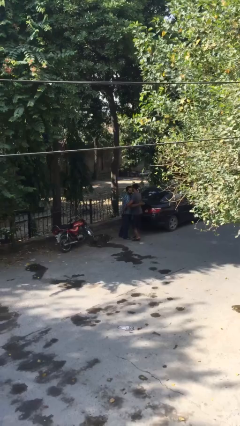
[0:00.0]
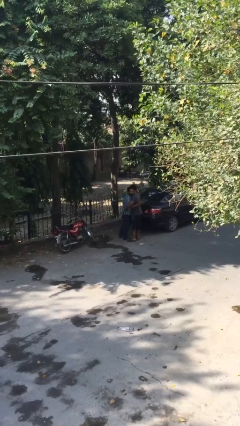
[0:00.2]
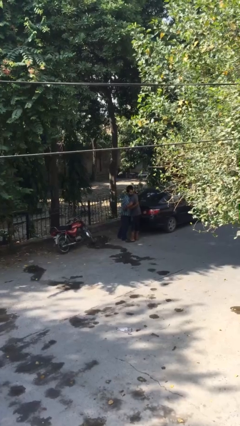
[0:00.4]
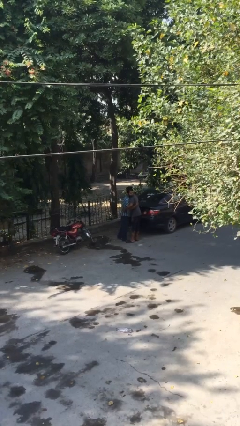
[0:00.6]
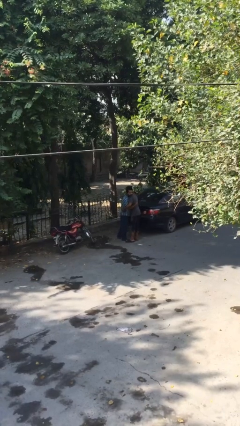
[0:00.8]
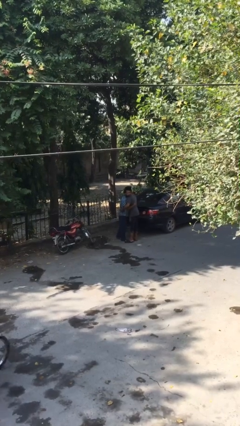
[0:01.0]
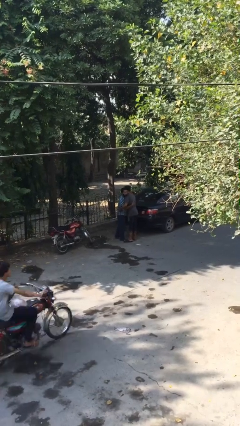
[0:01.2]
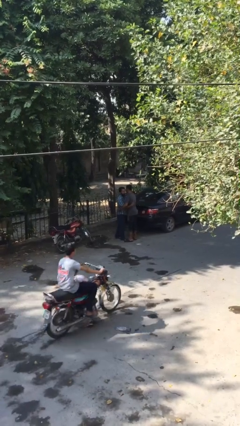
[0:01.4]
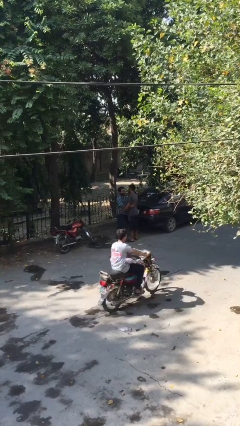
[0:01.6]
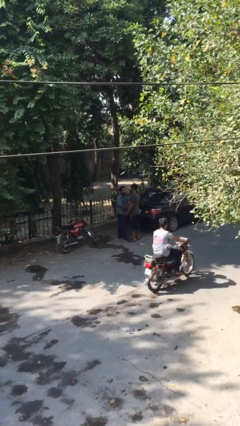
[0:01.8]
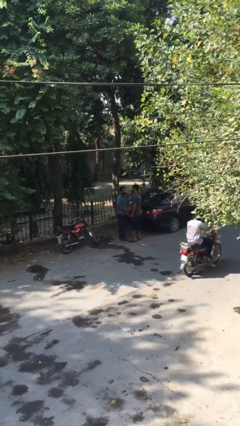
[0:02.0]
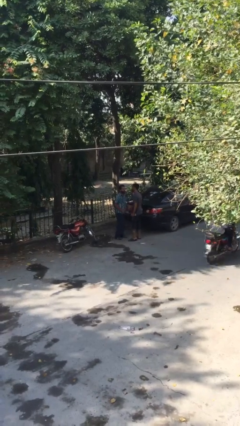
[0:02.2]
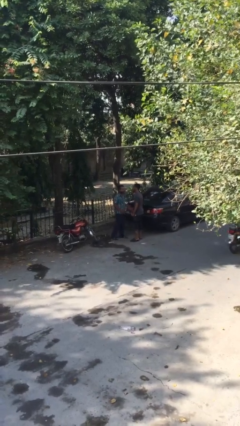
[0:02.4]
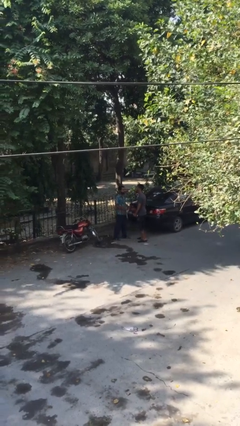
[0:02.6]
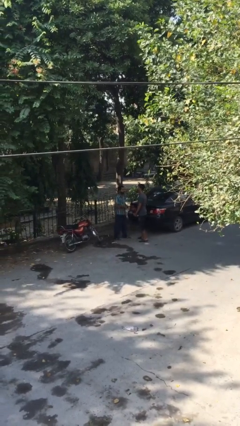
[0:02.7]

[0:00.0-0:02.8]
person embraces person

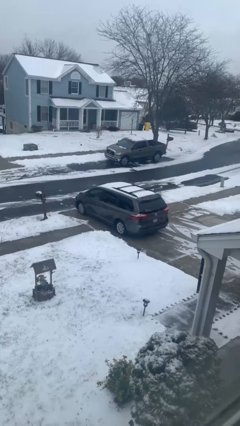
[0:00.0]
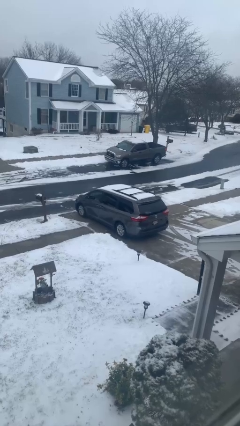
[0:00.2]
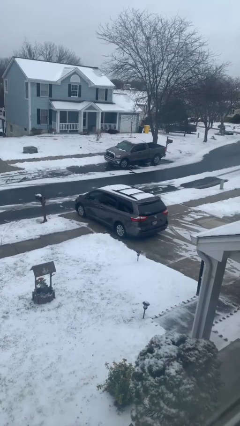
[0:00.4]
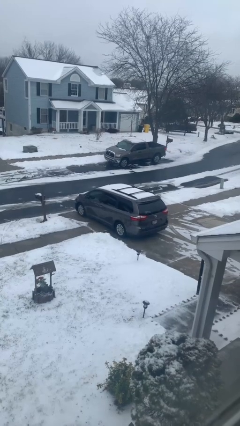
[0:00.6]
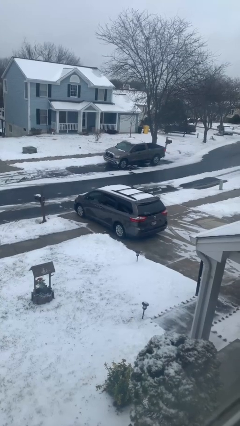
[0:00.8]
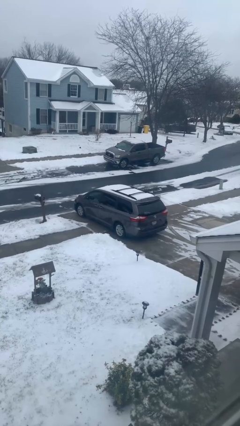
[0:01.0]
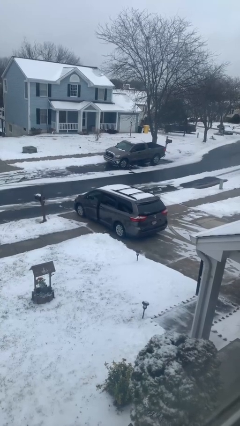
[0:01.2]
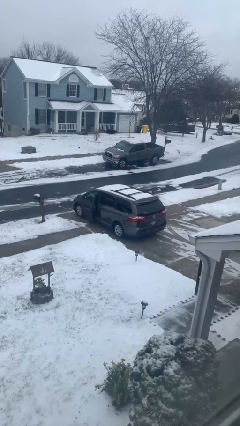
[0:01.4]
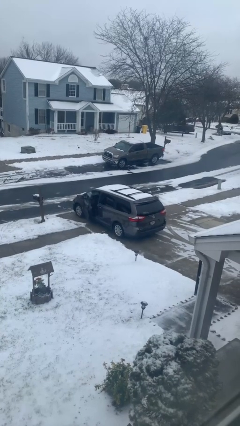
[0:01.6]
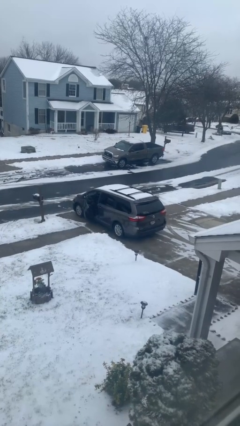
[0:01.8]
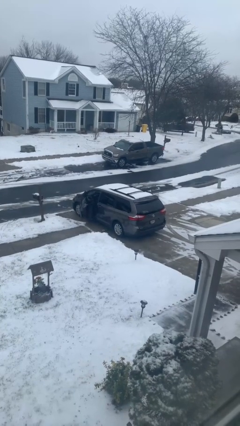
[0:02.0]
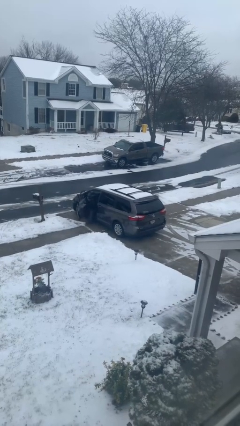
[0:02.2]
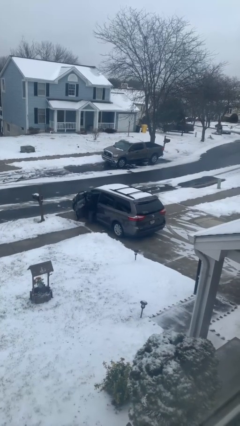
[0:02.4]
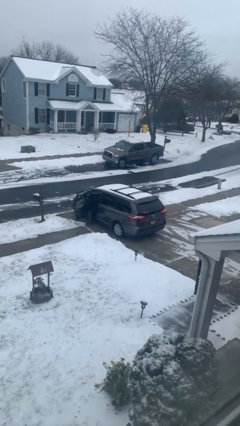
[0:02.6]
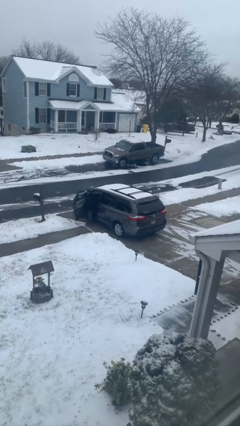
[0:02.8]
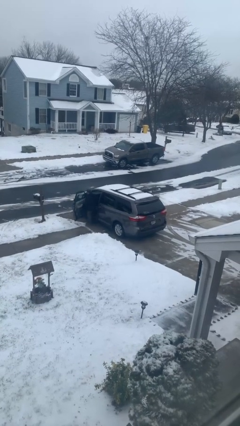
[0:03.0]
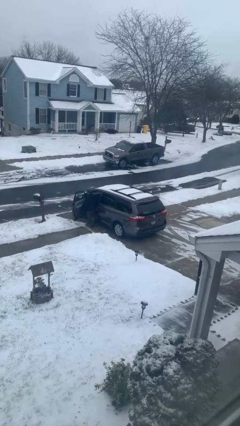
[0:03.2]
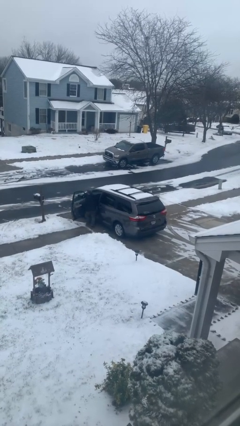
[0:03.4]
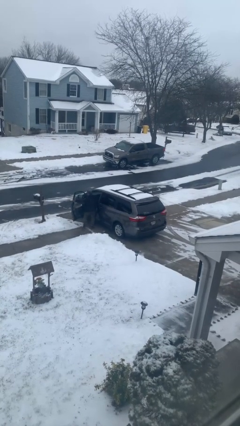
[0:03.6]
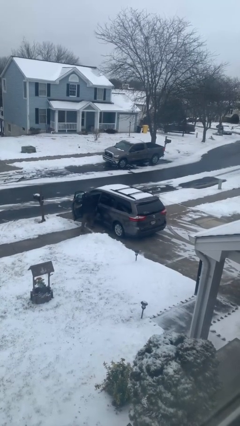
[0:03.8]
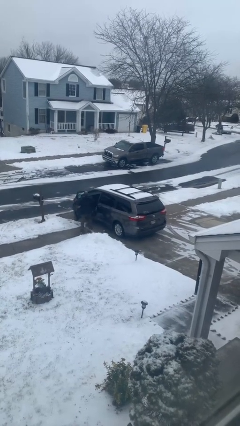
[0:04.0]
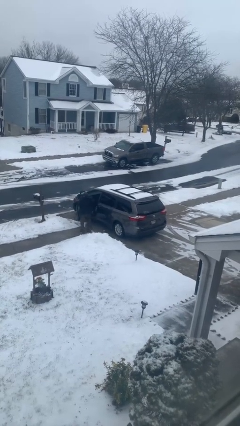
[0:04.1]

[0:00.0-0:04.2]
car drops off person

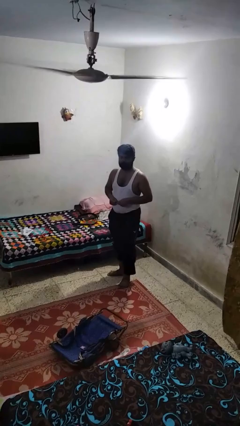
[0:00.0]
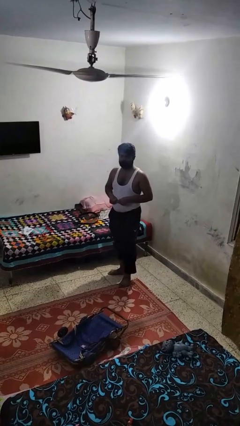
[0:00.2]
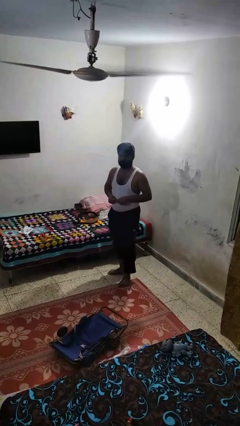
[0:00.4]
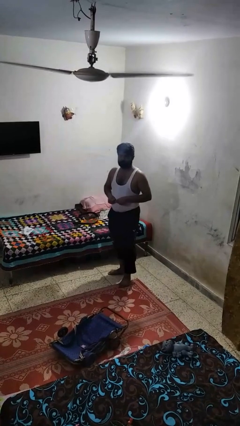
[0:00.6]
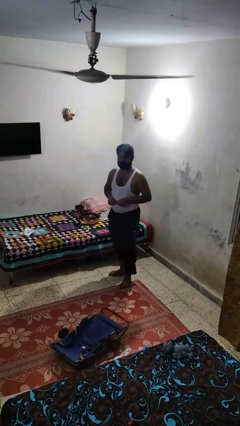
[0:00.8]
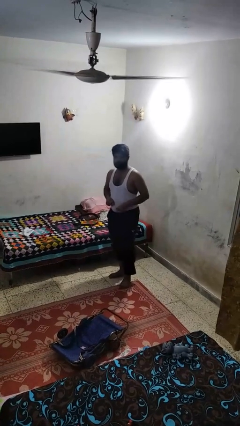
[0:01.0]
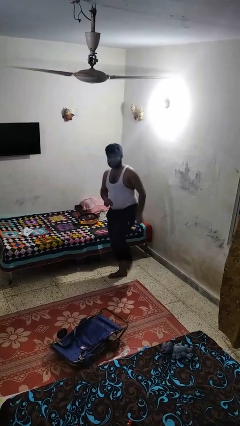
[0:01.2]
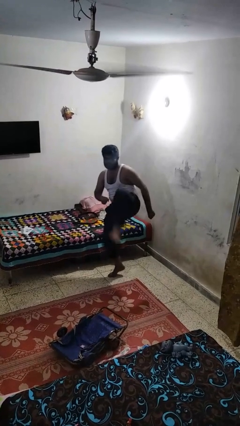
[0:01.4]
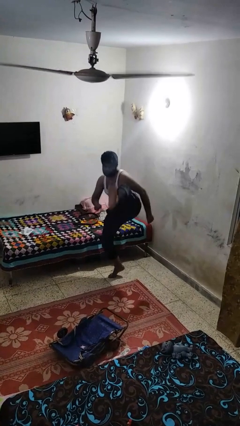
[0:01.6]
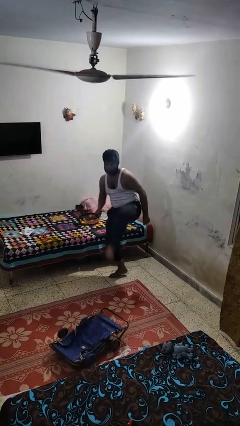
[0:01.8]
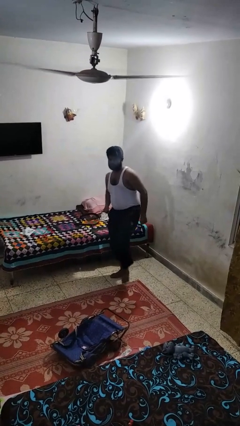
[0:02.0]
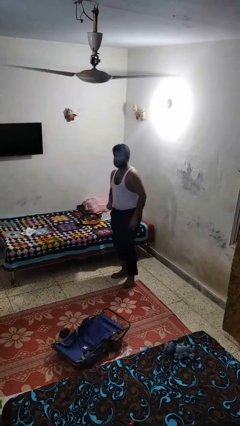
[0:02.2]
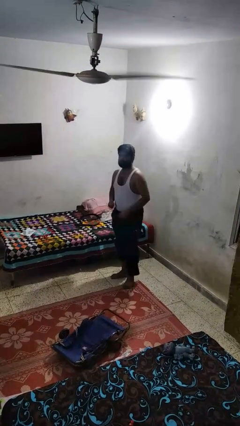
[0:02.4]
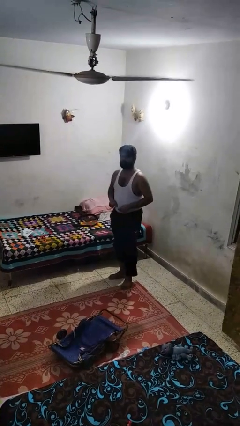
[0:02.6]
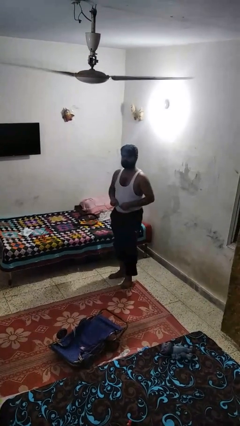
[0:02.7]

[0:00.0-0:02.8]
person karate kicks

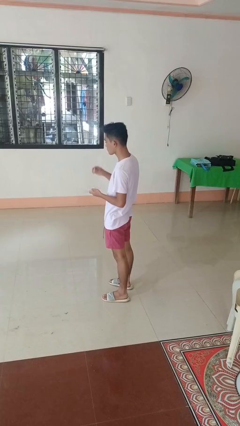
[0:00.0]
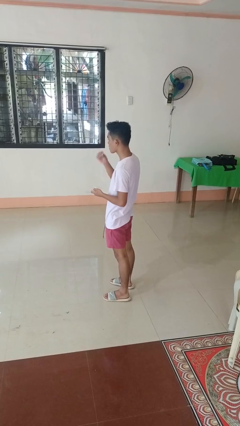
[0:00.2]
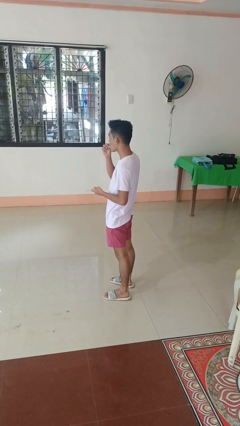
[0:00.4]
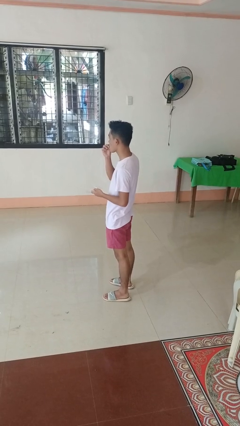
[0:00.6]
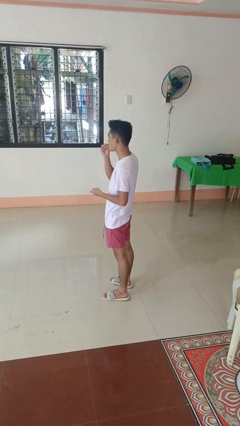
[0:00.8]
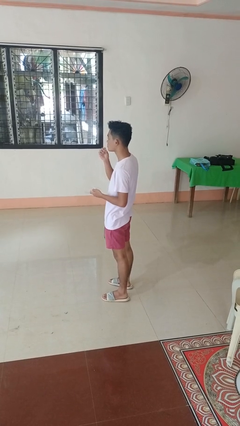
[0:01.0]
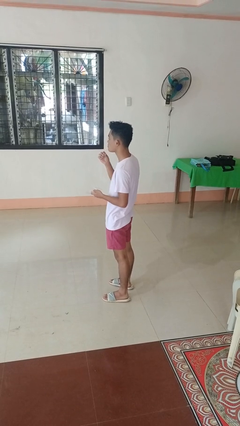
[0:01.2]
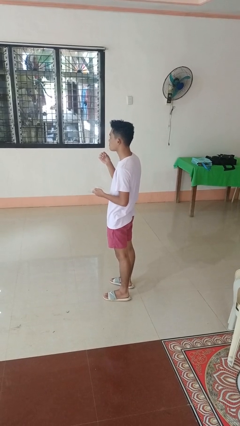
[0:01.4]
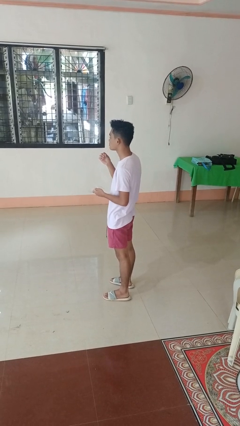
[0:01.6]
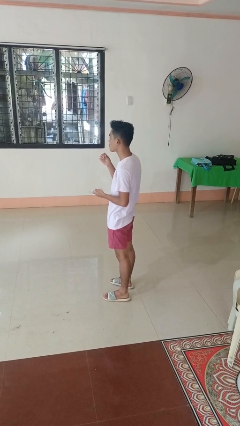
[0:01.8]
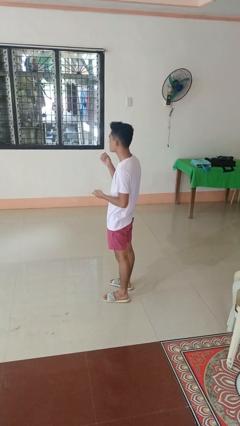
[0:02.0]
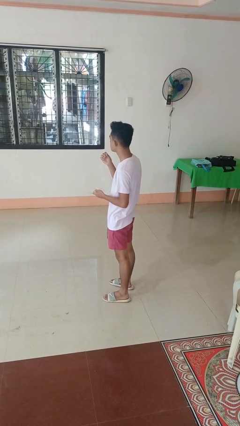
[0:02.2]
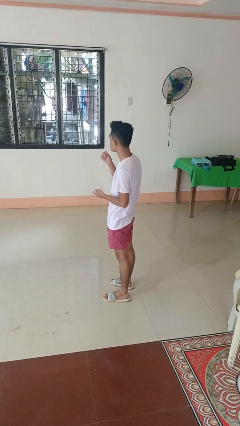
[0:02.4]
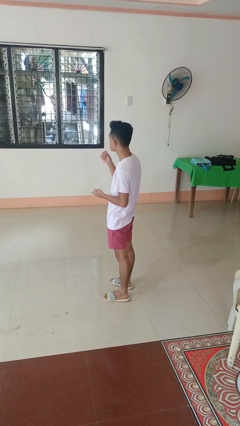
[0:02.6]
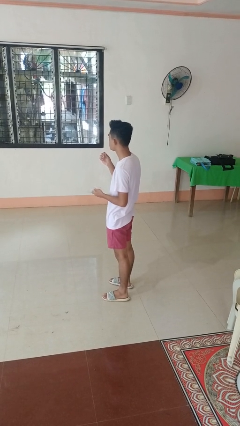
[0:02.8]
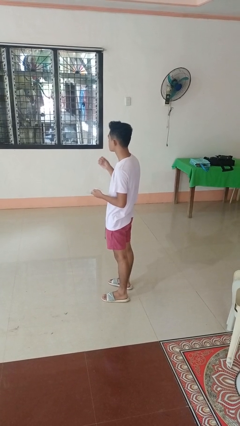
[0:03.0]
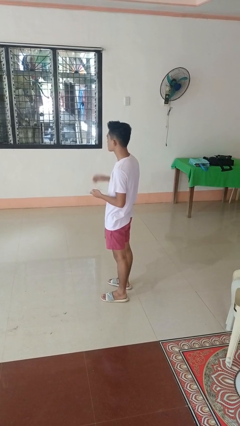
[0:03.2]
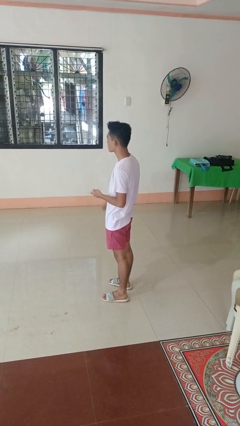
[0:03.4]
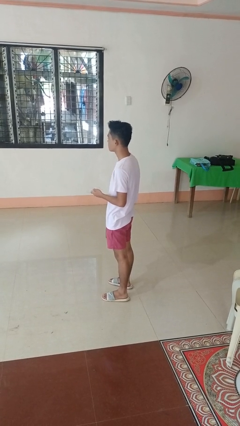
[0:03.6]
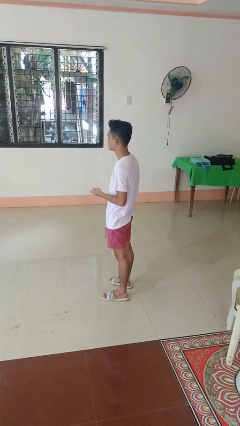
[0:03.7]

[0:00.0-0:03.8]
person eats snack from bag

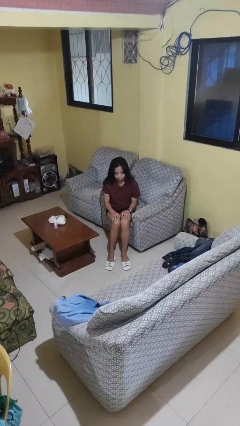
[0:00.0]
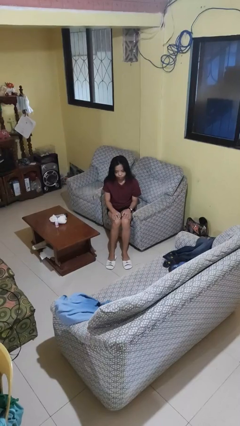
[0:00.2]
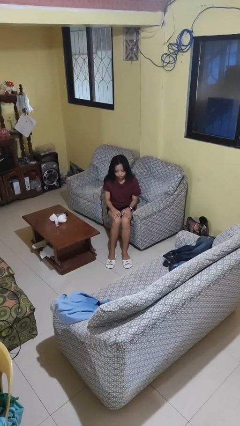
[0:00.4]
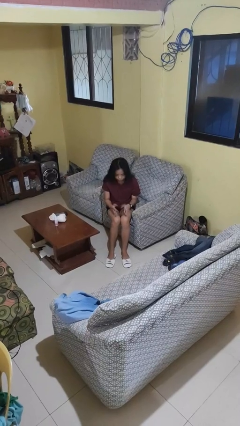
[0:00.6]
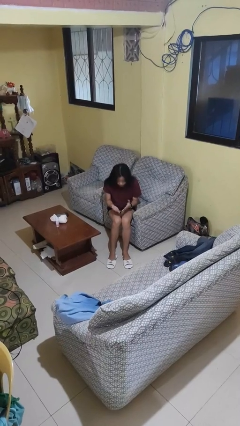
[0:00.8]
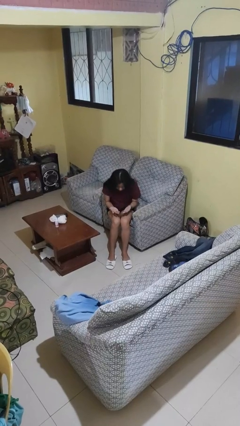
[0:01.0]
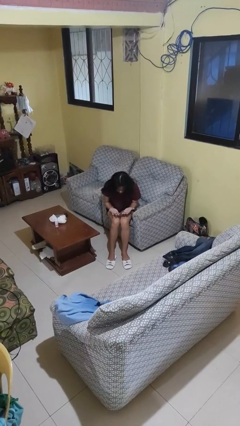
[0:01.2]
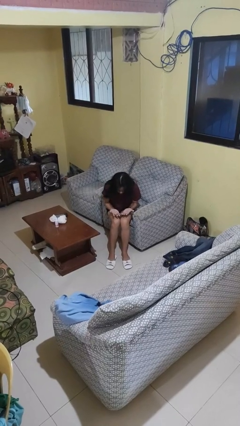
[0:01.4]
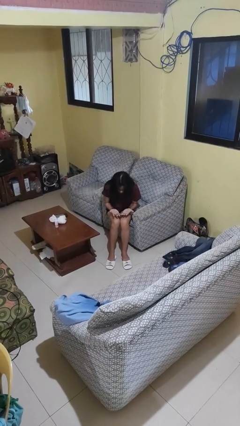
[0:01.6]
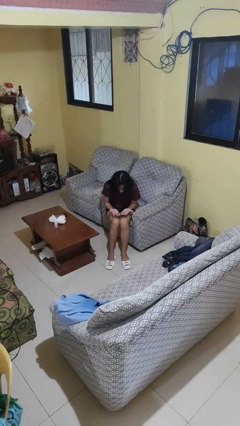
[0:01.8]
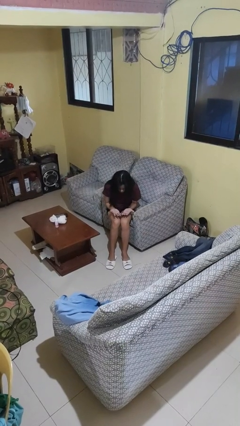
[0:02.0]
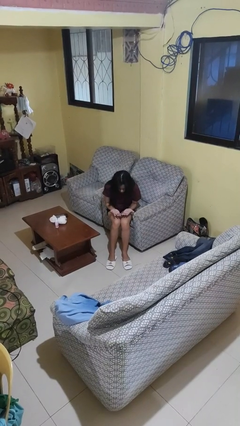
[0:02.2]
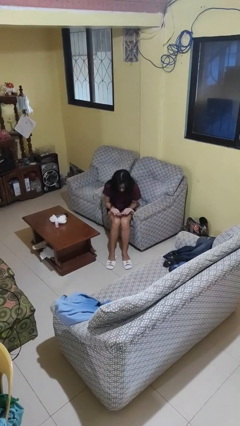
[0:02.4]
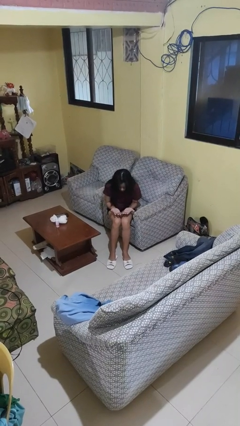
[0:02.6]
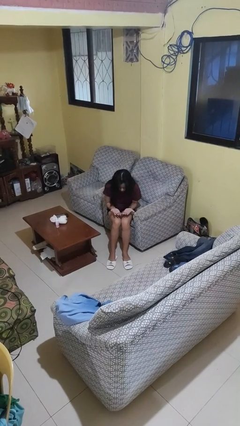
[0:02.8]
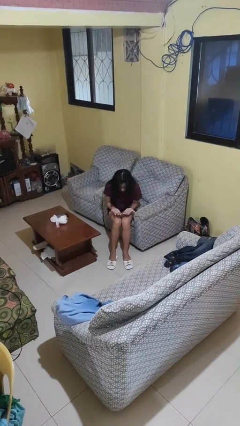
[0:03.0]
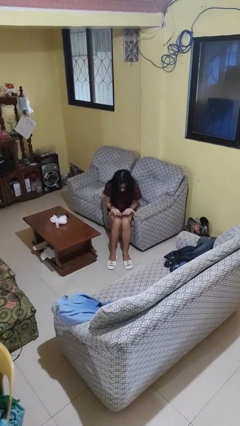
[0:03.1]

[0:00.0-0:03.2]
person looks at hands in lap

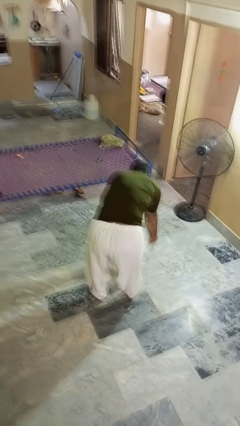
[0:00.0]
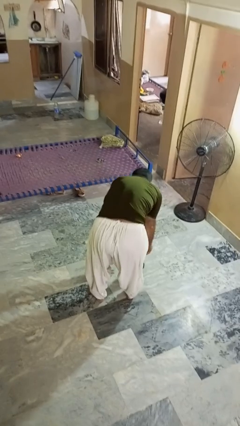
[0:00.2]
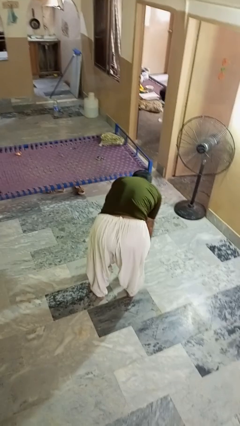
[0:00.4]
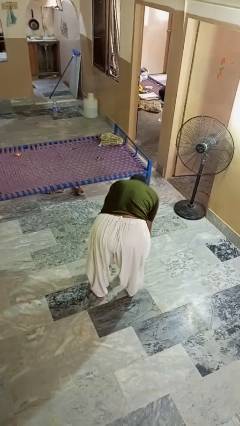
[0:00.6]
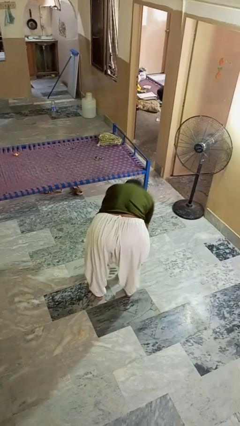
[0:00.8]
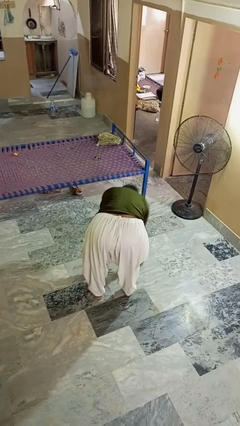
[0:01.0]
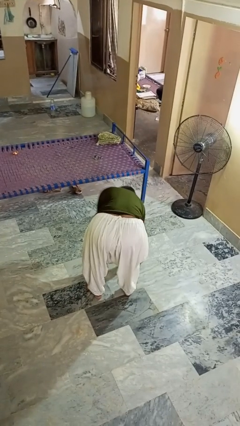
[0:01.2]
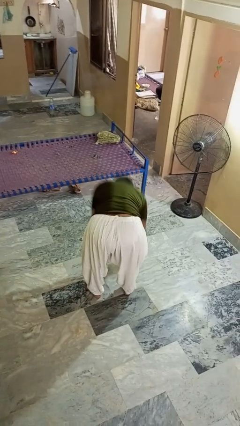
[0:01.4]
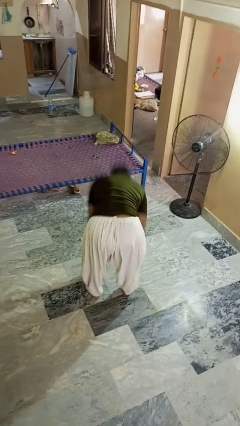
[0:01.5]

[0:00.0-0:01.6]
person catches dropped object
